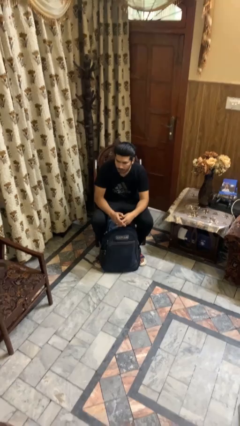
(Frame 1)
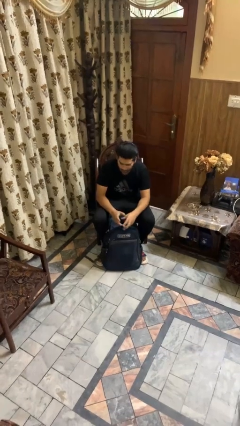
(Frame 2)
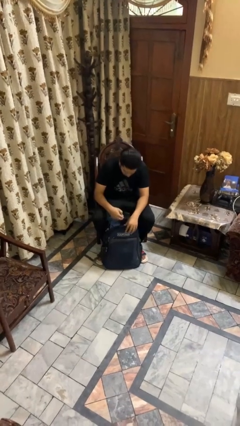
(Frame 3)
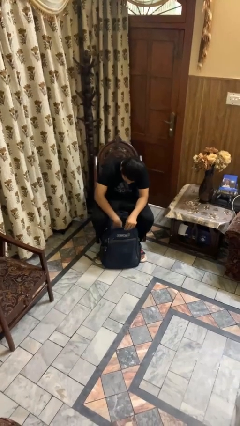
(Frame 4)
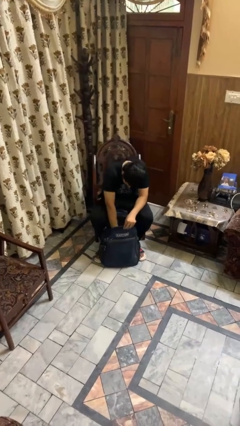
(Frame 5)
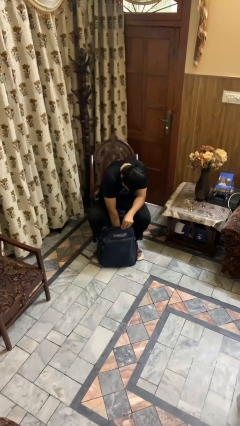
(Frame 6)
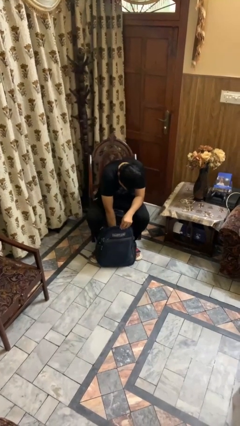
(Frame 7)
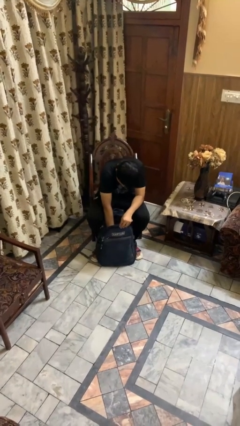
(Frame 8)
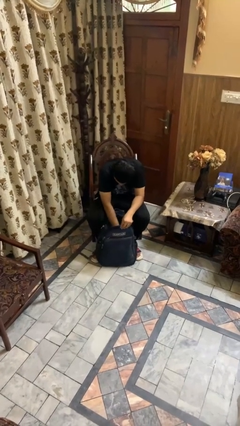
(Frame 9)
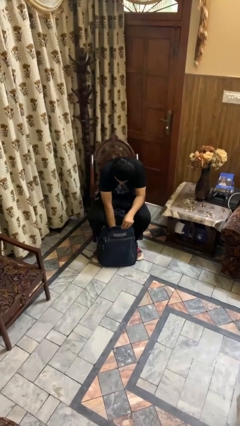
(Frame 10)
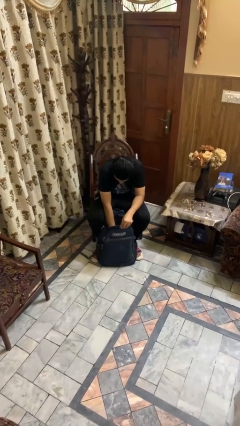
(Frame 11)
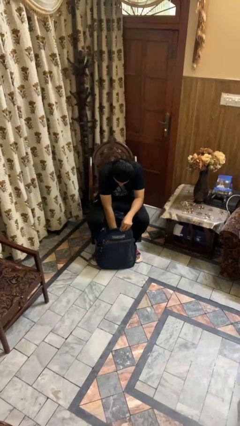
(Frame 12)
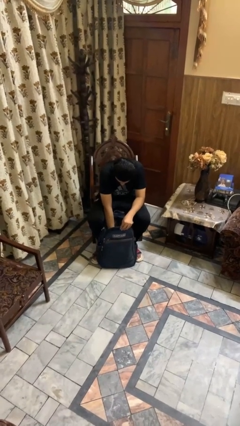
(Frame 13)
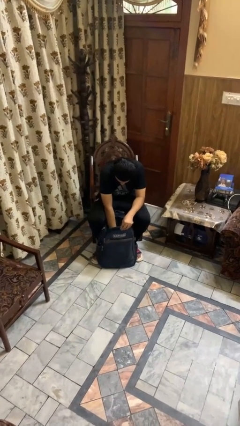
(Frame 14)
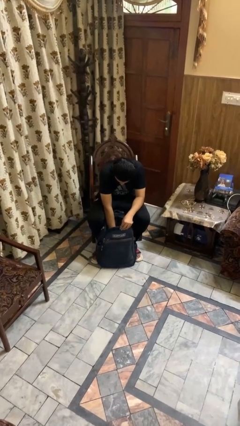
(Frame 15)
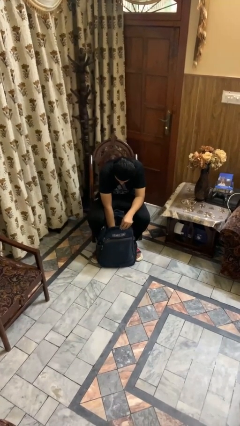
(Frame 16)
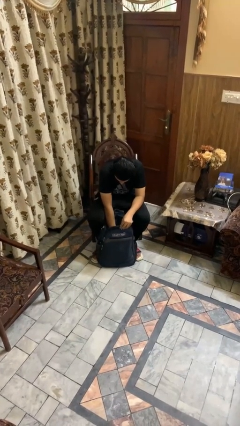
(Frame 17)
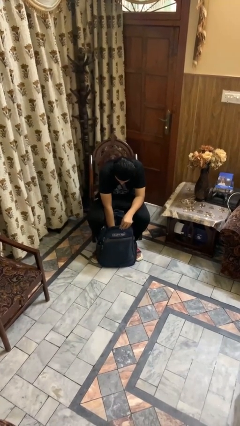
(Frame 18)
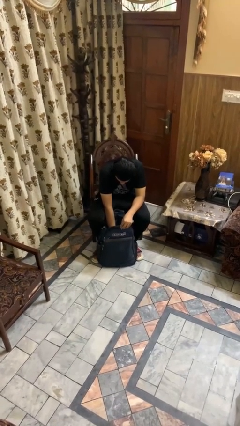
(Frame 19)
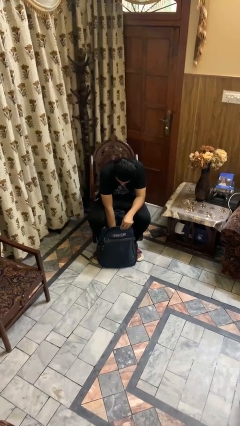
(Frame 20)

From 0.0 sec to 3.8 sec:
person searches in backpack

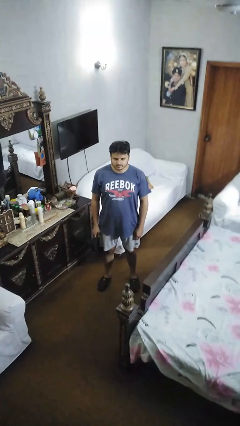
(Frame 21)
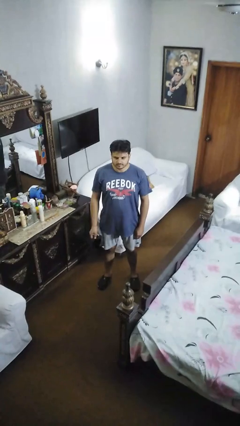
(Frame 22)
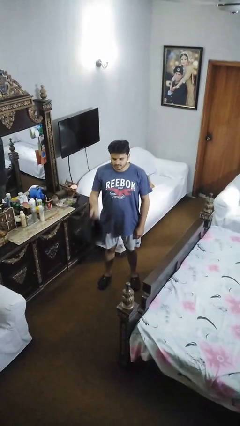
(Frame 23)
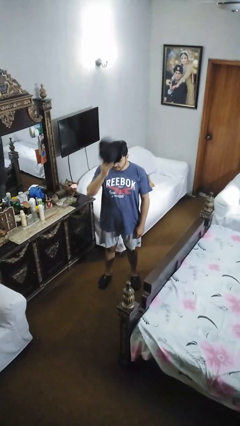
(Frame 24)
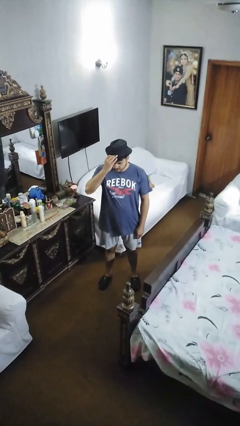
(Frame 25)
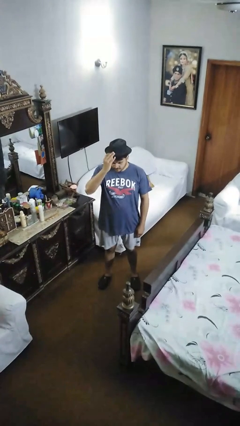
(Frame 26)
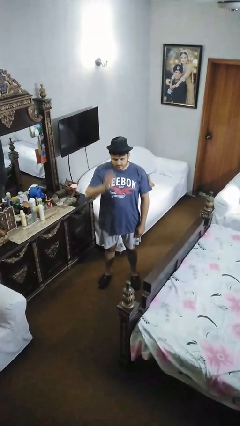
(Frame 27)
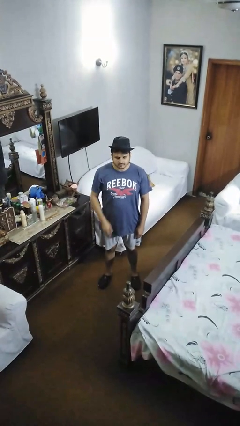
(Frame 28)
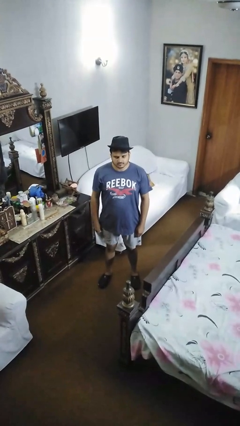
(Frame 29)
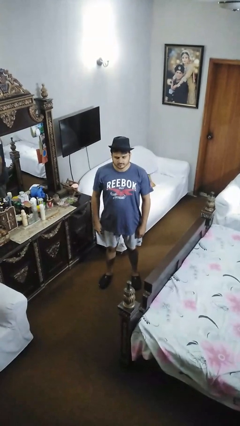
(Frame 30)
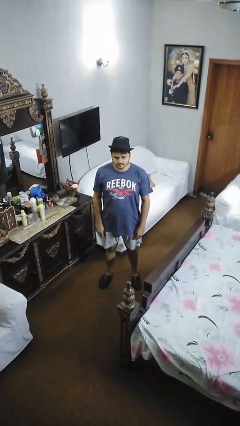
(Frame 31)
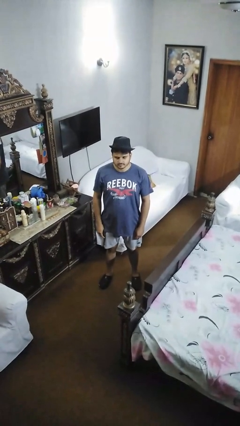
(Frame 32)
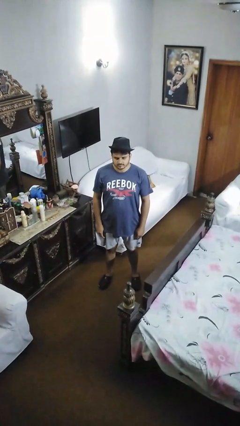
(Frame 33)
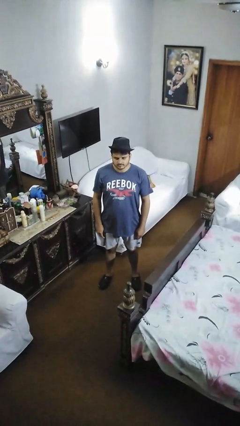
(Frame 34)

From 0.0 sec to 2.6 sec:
person puts on hat

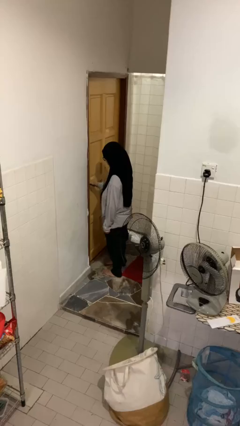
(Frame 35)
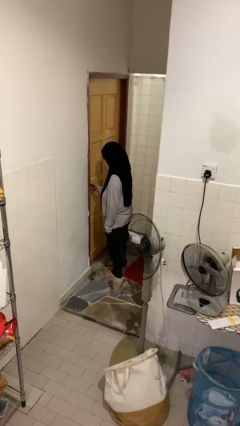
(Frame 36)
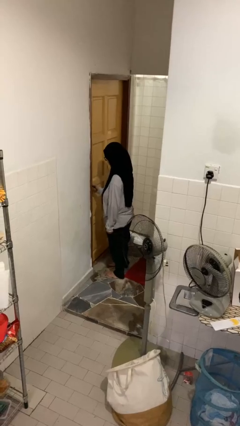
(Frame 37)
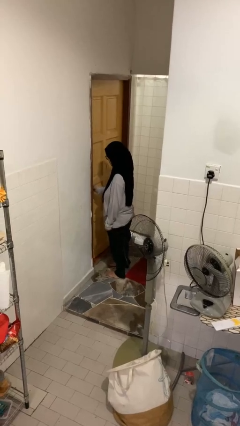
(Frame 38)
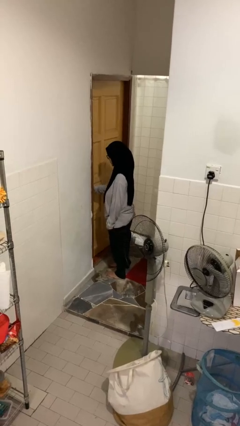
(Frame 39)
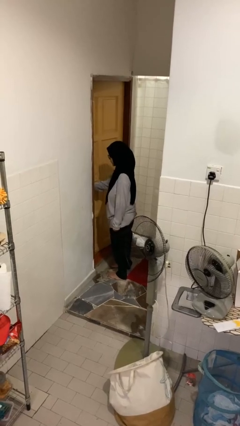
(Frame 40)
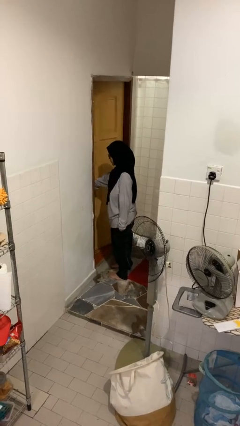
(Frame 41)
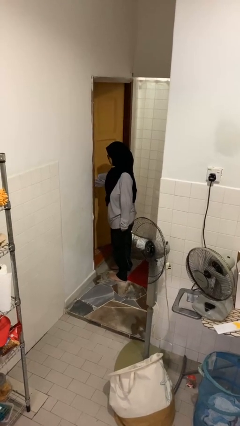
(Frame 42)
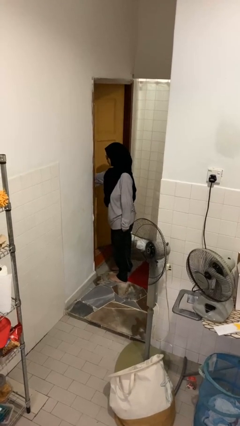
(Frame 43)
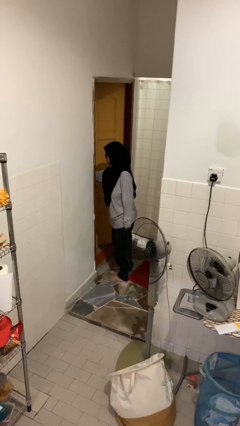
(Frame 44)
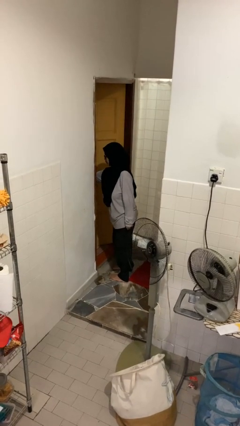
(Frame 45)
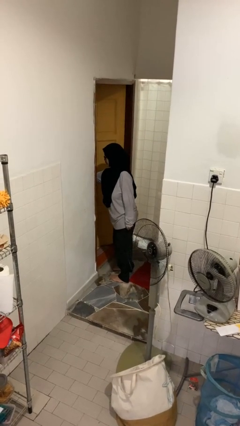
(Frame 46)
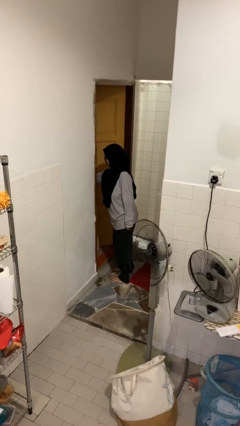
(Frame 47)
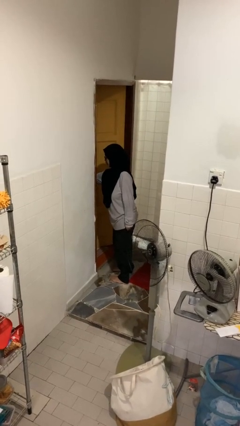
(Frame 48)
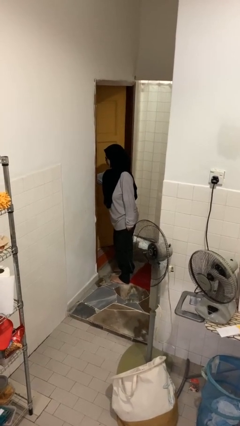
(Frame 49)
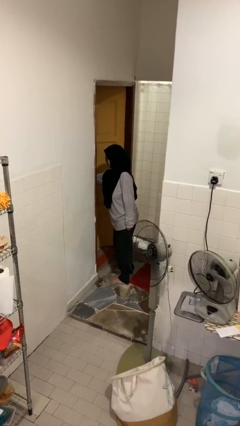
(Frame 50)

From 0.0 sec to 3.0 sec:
person opens facility door

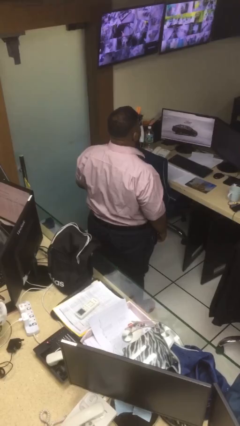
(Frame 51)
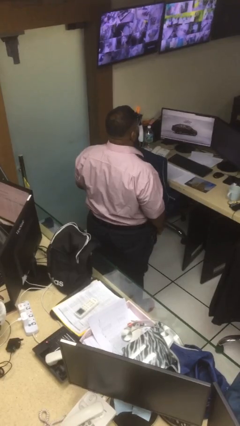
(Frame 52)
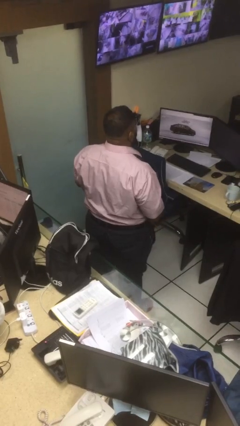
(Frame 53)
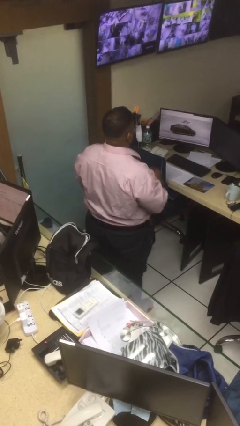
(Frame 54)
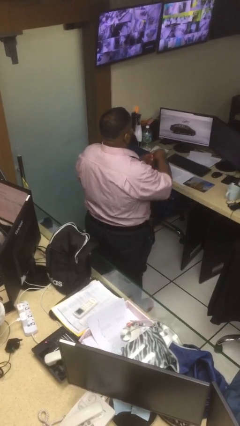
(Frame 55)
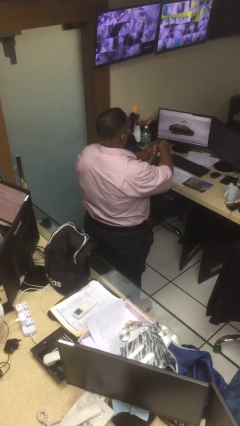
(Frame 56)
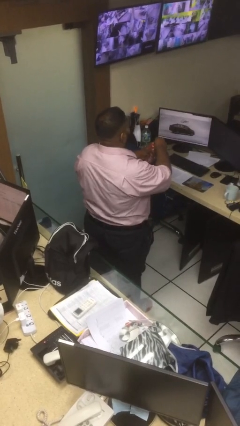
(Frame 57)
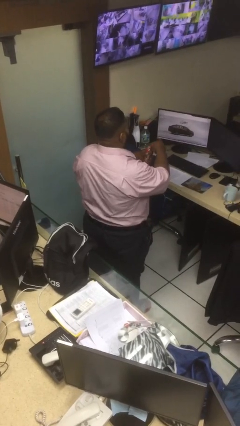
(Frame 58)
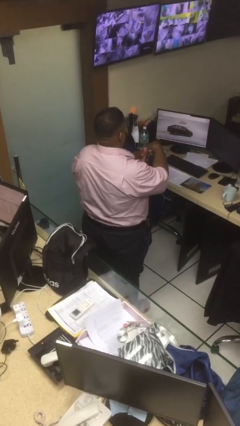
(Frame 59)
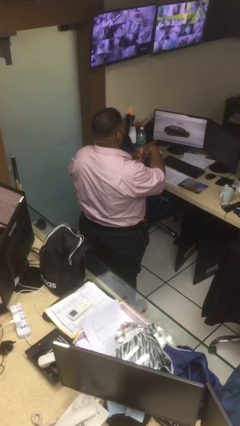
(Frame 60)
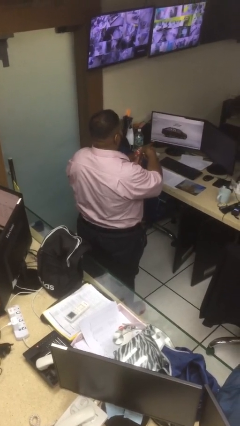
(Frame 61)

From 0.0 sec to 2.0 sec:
person opens beverage can

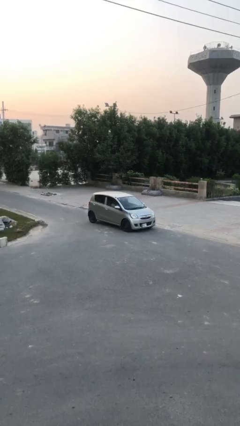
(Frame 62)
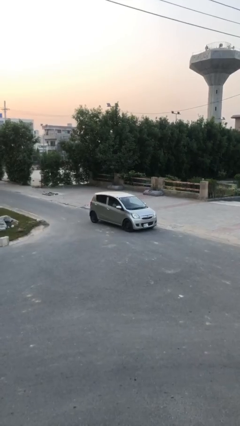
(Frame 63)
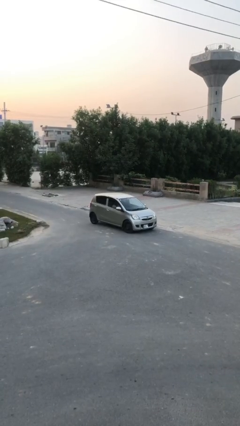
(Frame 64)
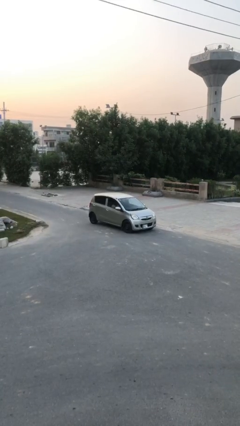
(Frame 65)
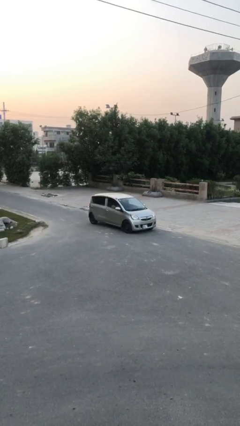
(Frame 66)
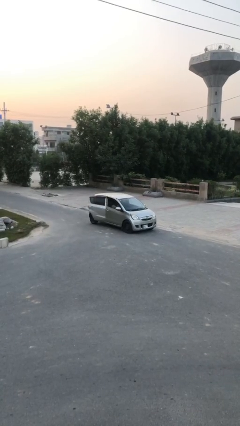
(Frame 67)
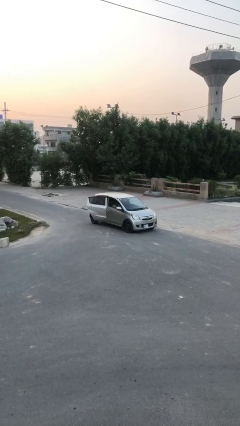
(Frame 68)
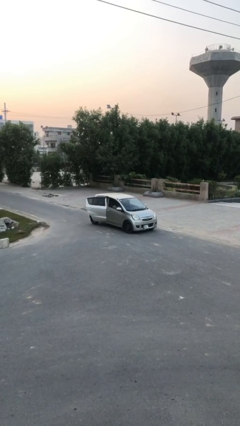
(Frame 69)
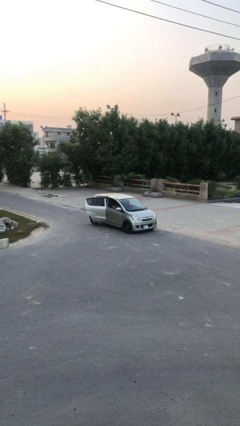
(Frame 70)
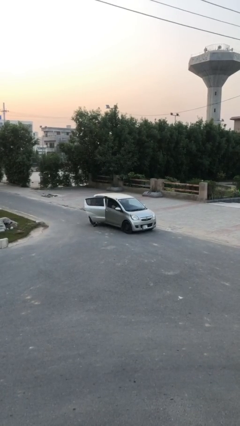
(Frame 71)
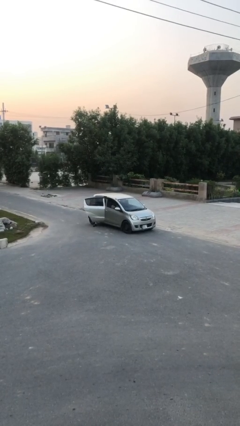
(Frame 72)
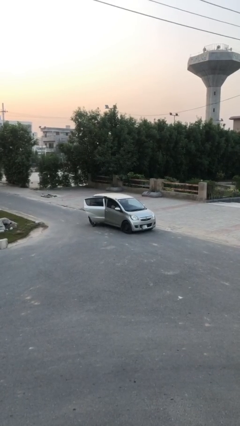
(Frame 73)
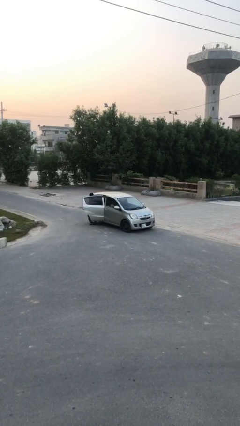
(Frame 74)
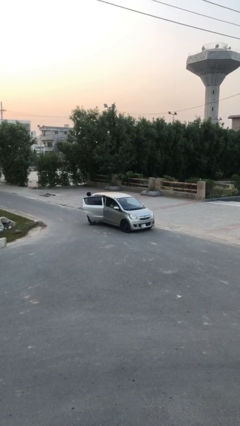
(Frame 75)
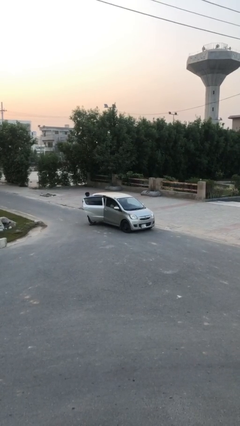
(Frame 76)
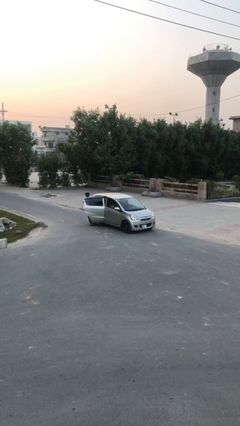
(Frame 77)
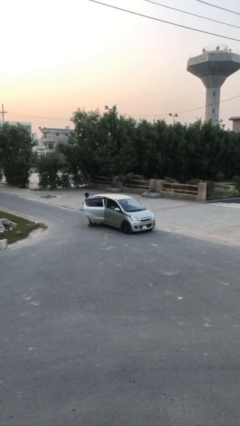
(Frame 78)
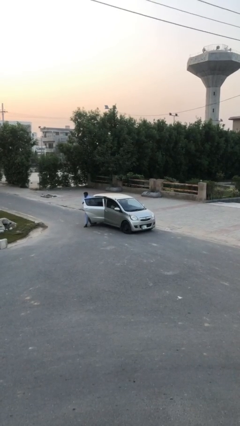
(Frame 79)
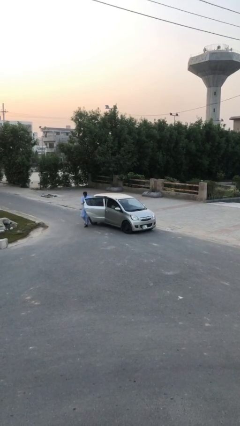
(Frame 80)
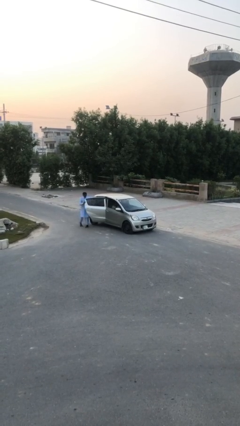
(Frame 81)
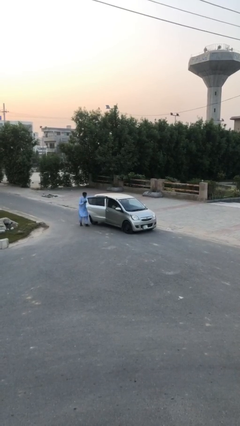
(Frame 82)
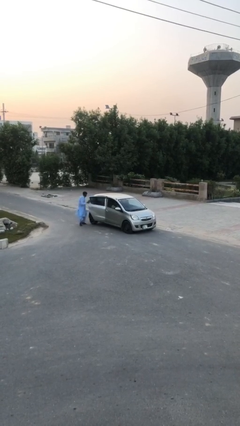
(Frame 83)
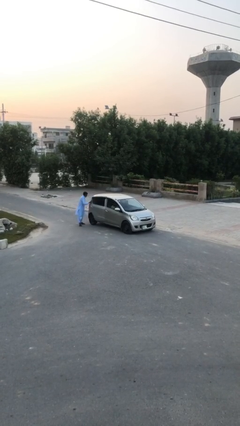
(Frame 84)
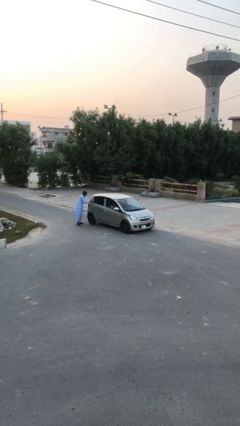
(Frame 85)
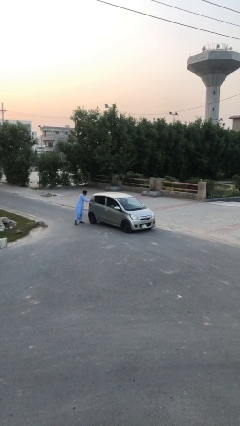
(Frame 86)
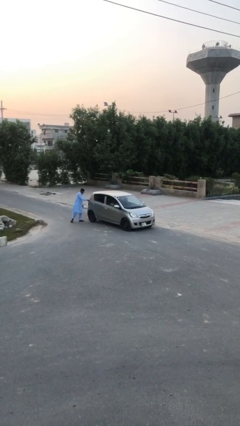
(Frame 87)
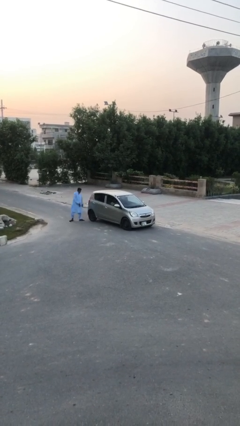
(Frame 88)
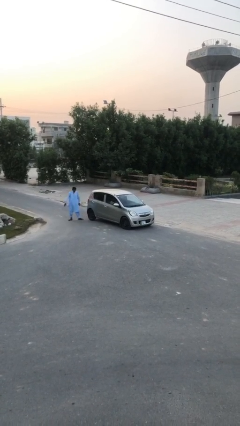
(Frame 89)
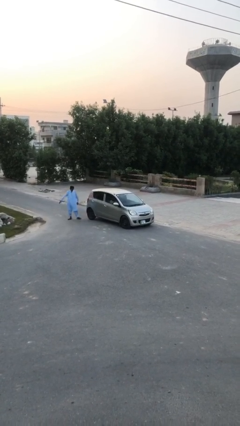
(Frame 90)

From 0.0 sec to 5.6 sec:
car drops off person

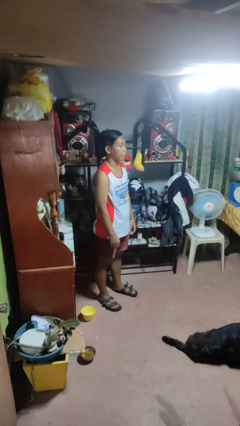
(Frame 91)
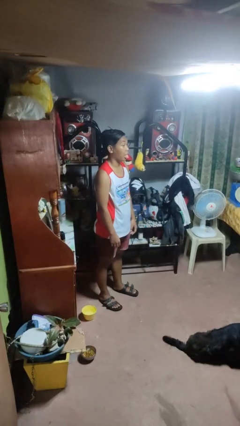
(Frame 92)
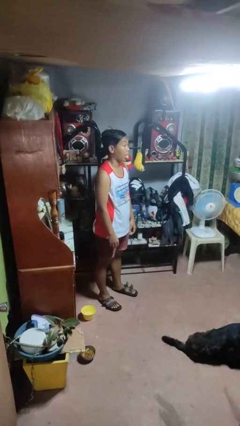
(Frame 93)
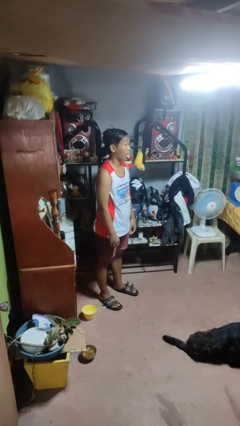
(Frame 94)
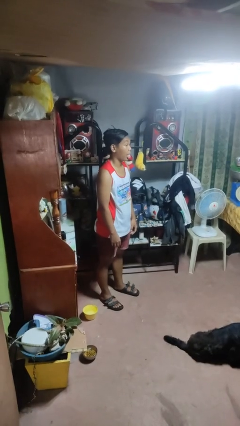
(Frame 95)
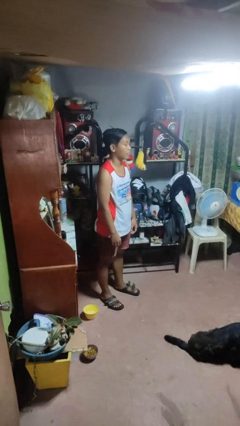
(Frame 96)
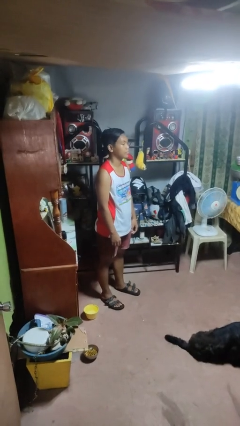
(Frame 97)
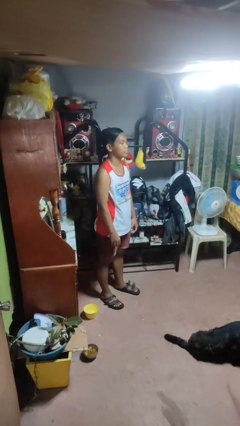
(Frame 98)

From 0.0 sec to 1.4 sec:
person sticks out tongue
